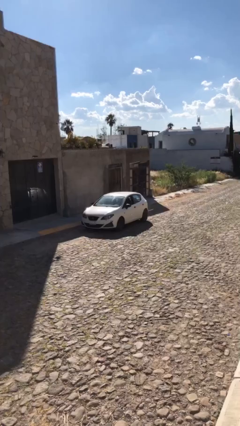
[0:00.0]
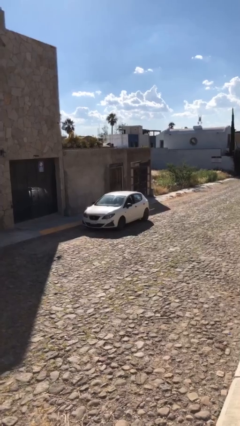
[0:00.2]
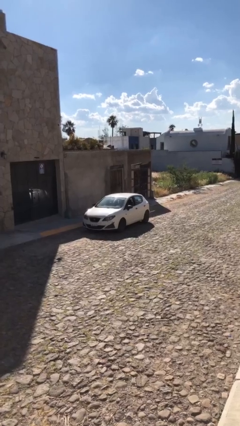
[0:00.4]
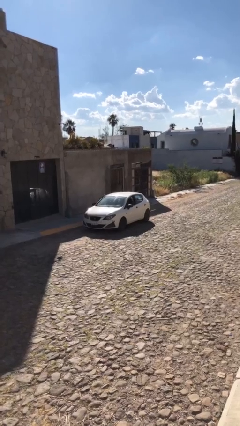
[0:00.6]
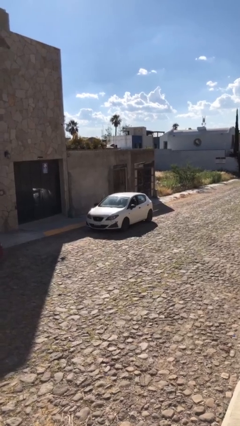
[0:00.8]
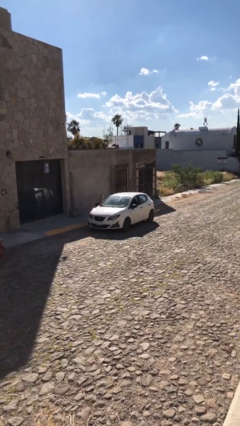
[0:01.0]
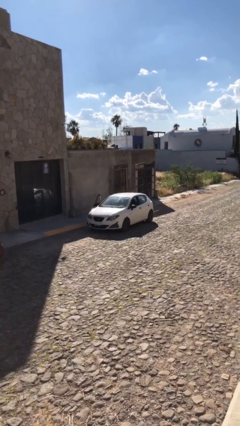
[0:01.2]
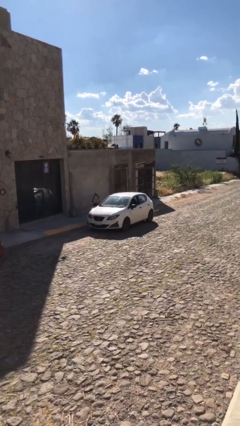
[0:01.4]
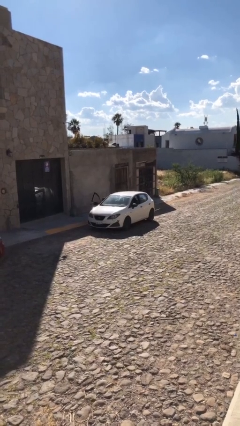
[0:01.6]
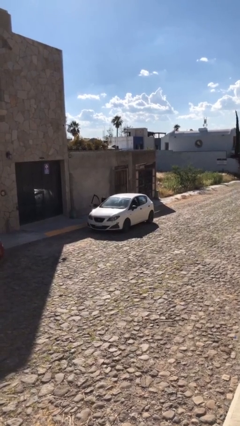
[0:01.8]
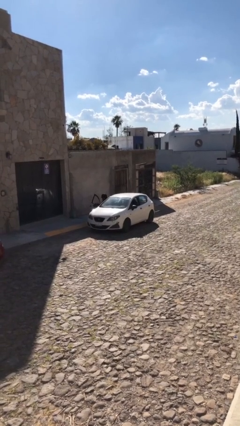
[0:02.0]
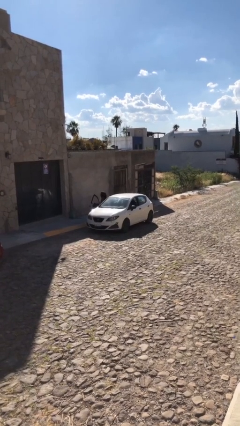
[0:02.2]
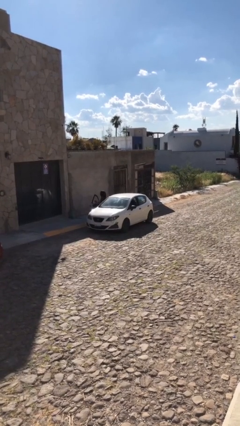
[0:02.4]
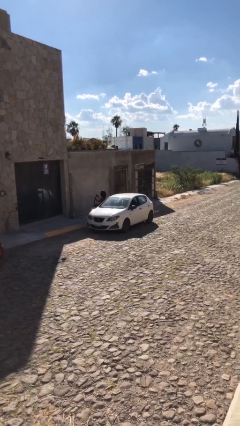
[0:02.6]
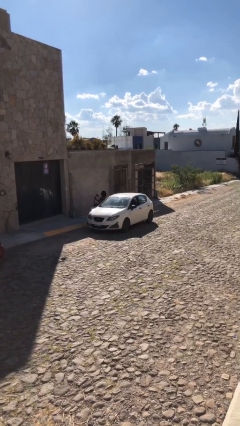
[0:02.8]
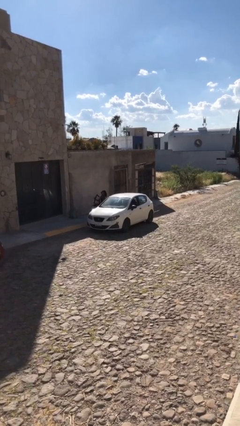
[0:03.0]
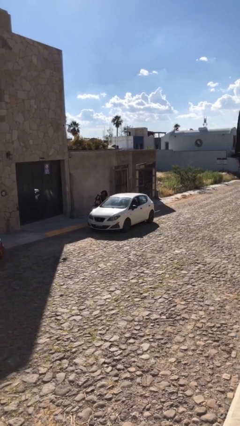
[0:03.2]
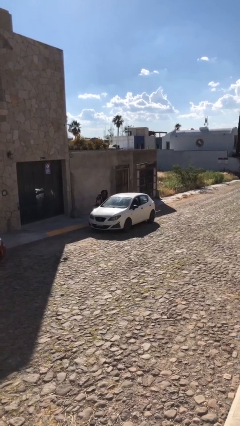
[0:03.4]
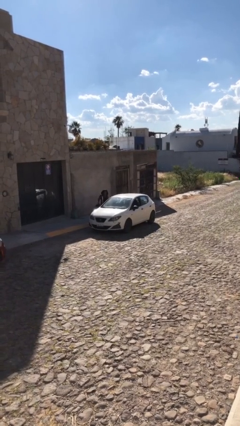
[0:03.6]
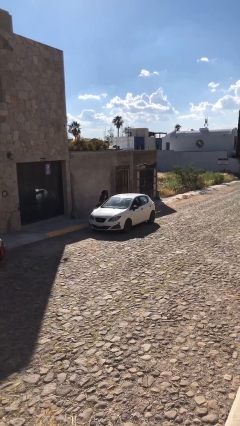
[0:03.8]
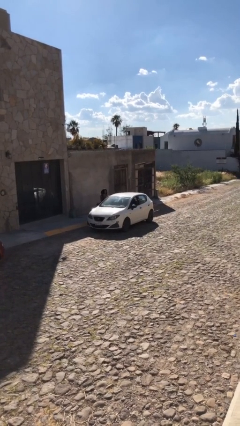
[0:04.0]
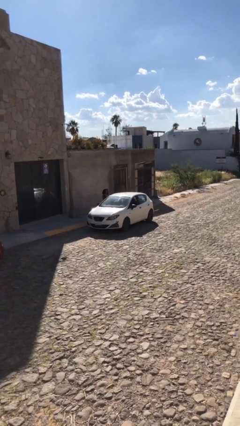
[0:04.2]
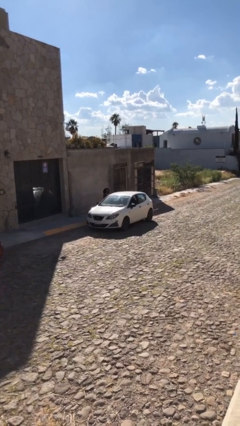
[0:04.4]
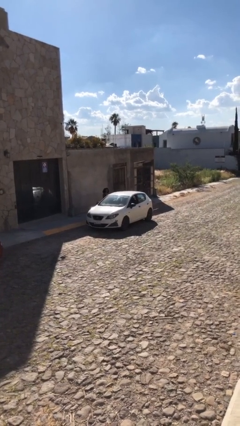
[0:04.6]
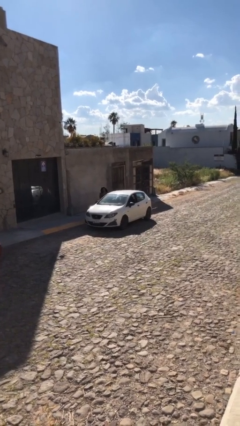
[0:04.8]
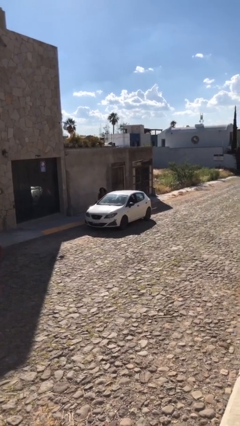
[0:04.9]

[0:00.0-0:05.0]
car drops off person

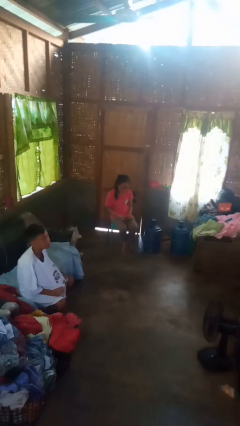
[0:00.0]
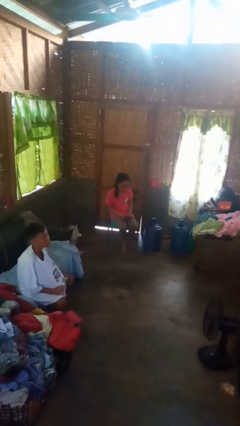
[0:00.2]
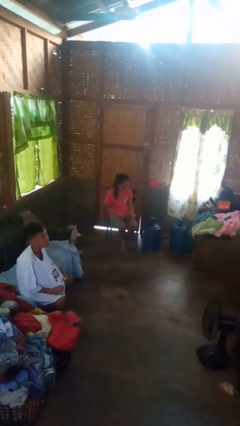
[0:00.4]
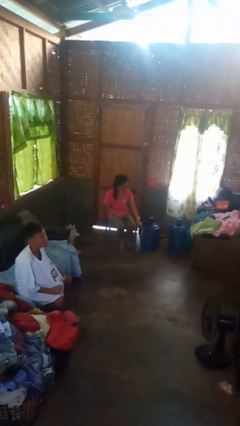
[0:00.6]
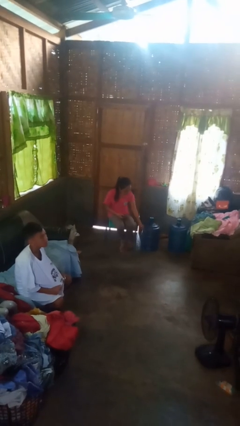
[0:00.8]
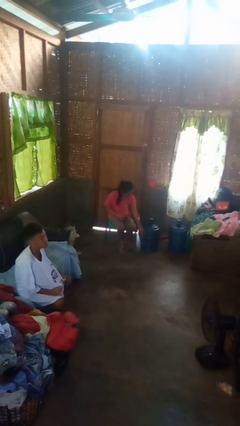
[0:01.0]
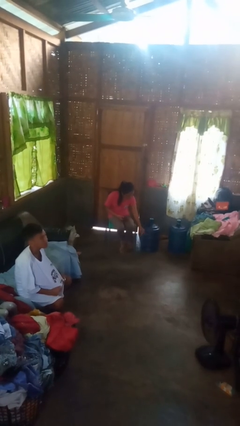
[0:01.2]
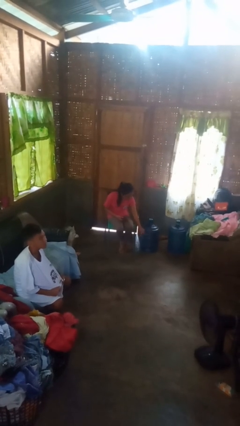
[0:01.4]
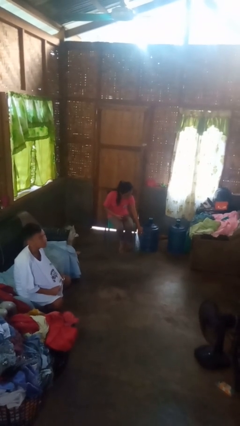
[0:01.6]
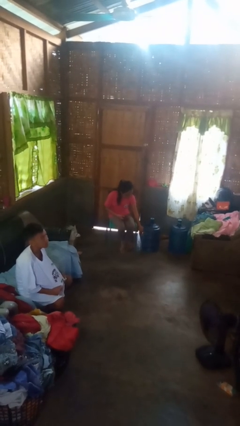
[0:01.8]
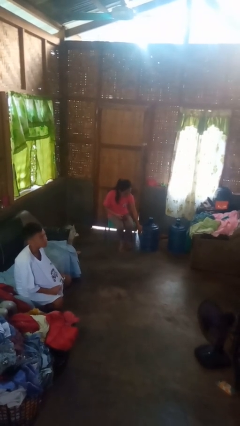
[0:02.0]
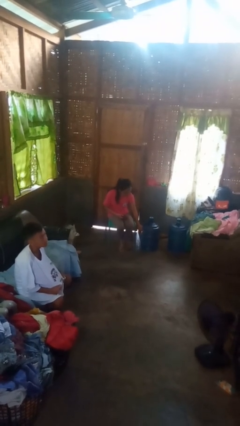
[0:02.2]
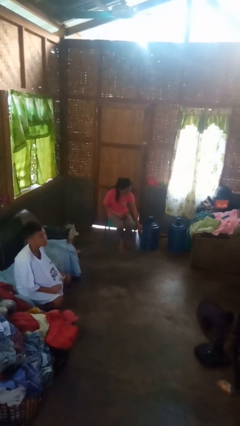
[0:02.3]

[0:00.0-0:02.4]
person taps object with finger

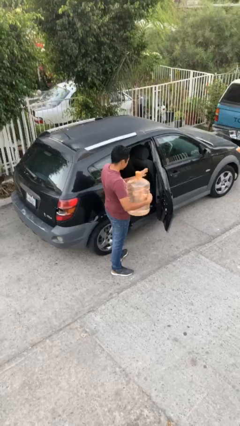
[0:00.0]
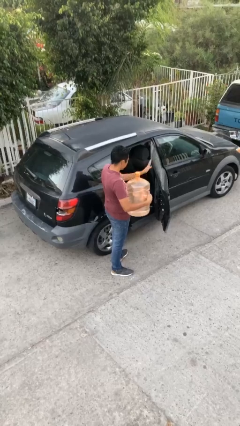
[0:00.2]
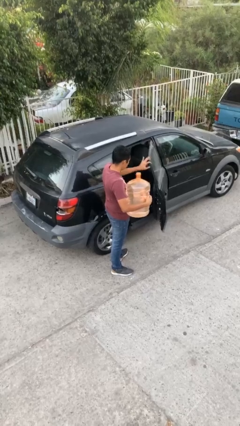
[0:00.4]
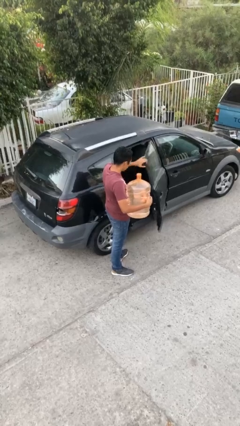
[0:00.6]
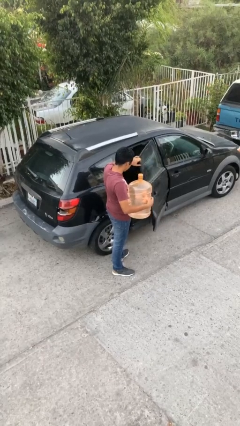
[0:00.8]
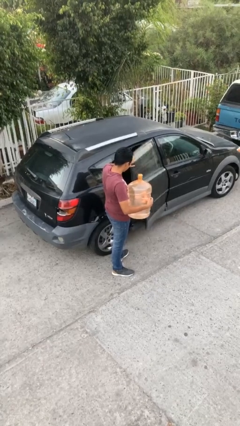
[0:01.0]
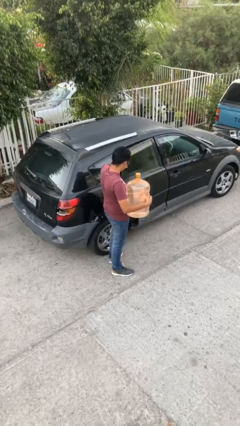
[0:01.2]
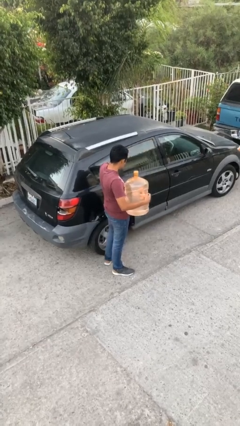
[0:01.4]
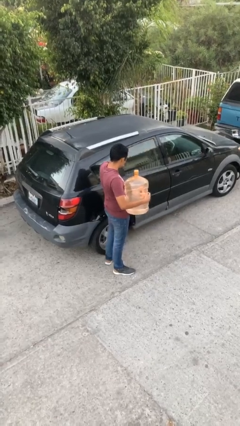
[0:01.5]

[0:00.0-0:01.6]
person closes car door

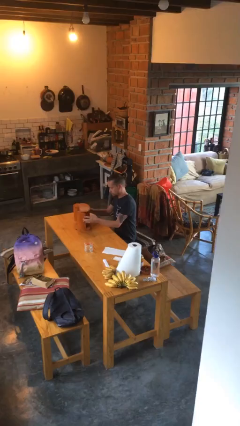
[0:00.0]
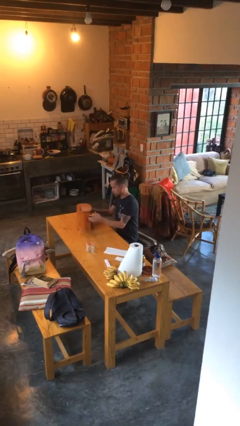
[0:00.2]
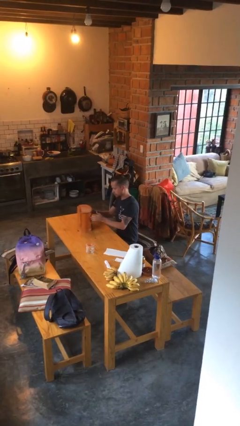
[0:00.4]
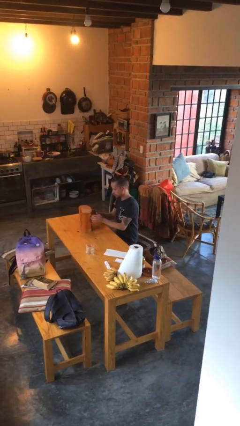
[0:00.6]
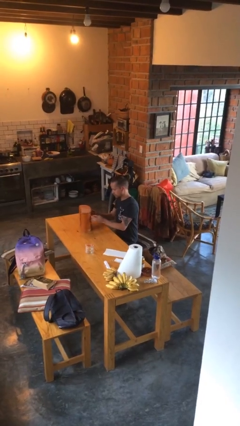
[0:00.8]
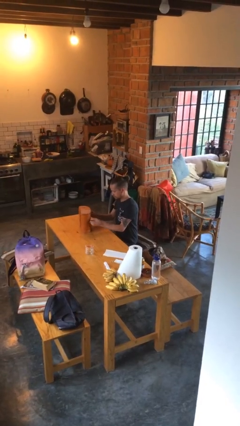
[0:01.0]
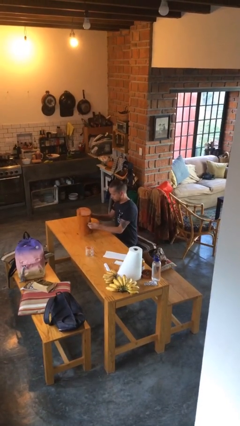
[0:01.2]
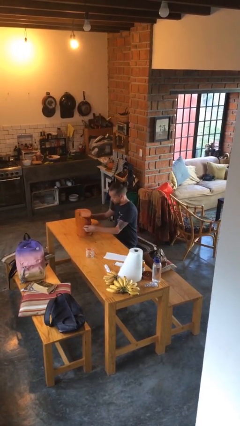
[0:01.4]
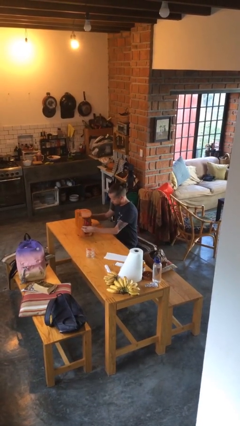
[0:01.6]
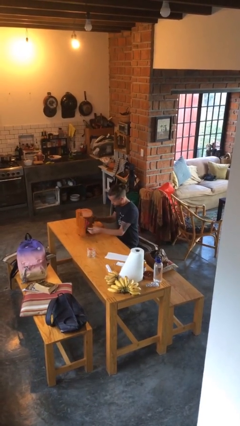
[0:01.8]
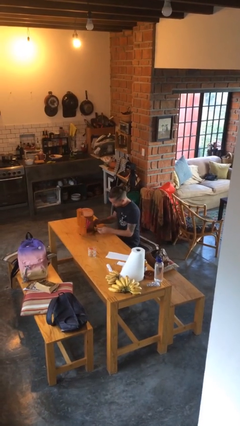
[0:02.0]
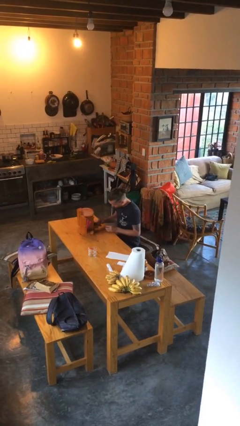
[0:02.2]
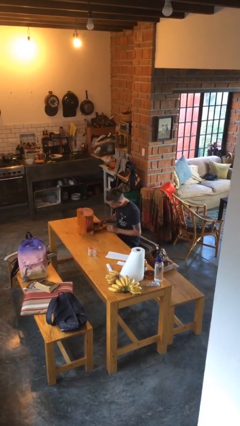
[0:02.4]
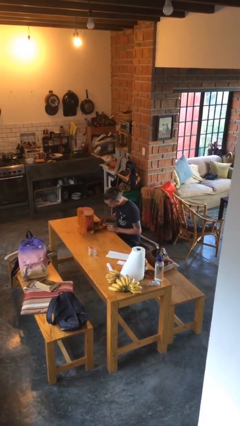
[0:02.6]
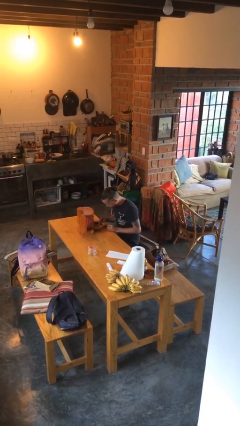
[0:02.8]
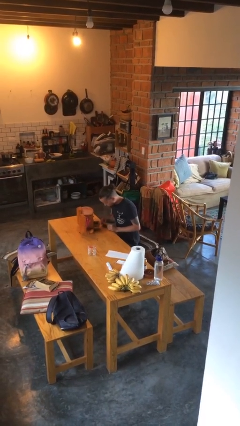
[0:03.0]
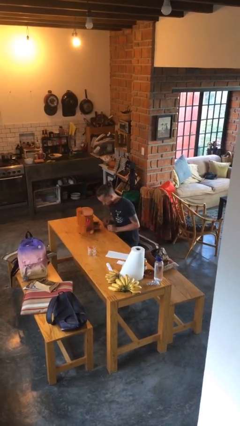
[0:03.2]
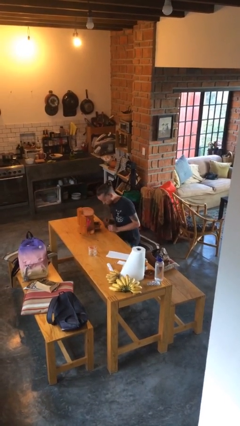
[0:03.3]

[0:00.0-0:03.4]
person opens jewelry box

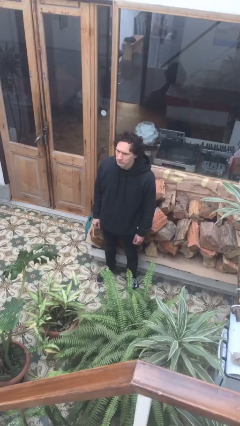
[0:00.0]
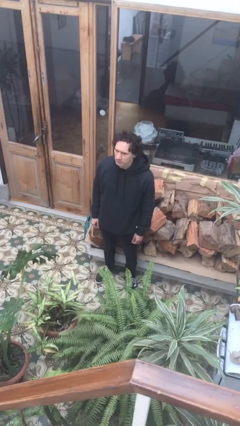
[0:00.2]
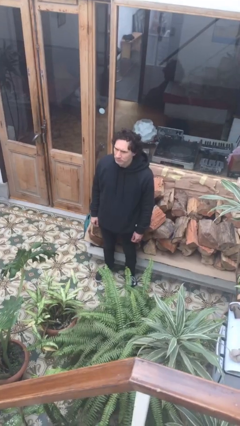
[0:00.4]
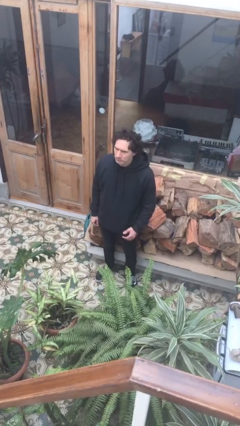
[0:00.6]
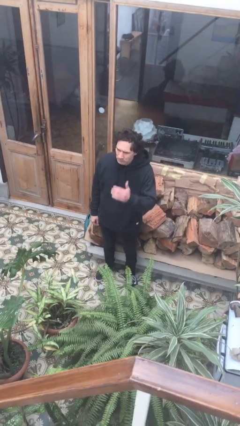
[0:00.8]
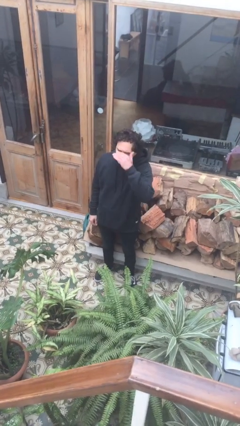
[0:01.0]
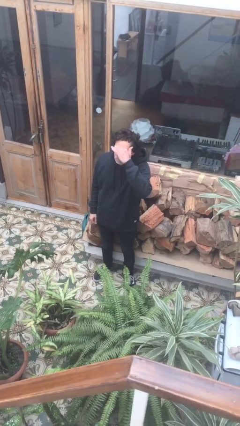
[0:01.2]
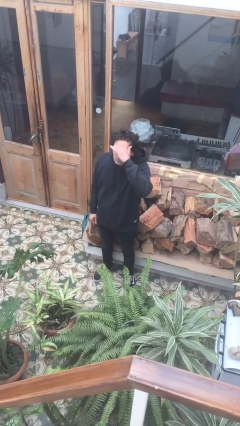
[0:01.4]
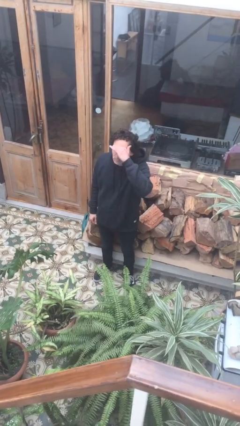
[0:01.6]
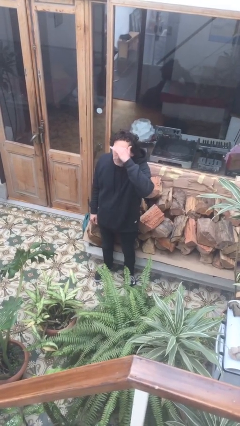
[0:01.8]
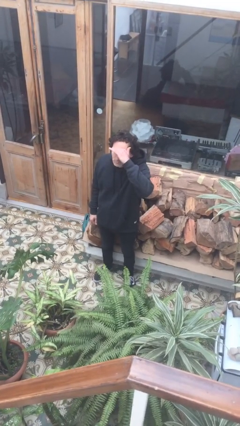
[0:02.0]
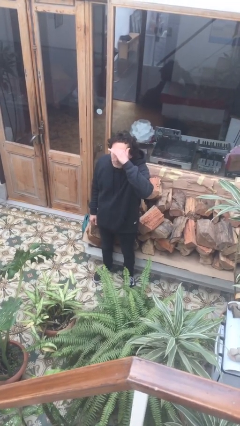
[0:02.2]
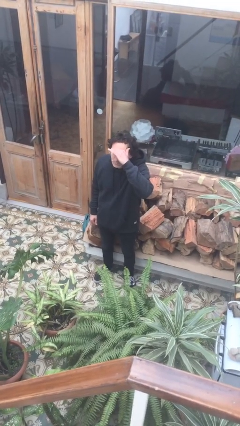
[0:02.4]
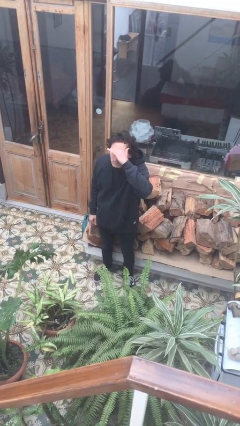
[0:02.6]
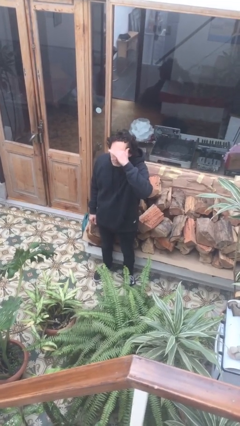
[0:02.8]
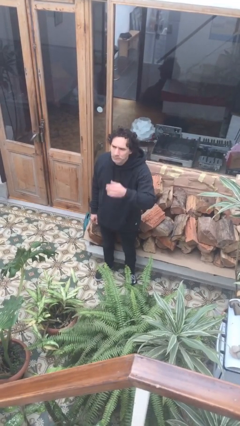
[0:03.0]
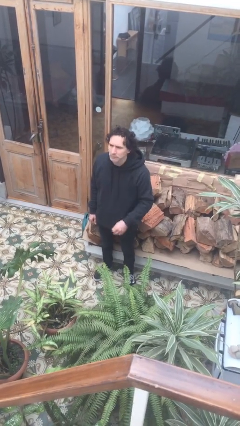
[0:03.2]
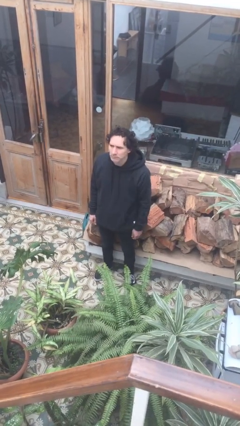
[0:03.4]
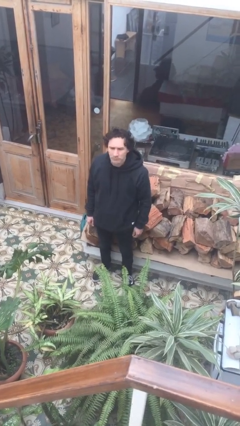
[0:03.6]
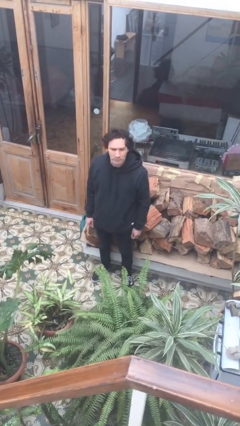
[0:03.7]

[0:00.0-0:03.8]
person shades eyes

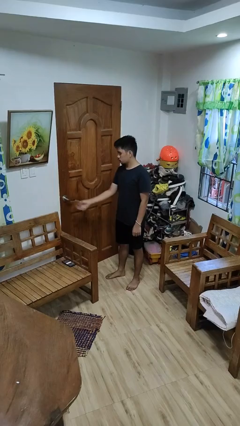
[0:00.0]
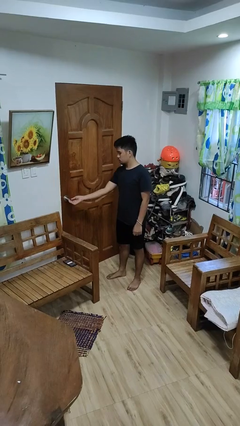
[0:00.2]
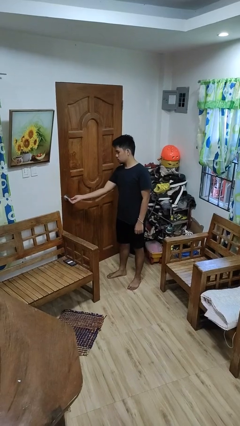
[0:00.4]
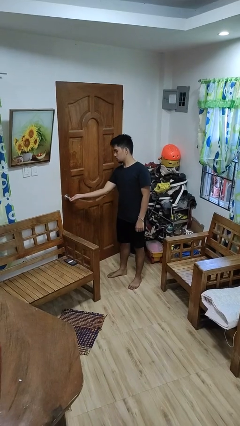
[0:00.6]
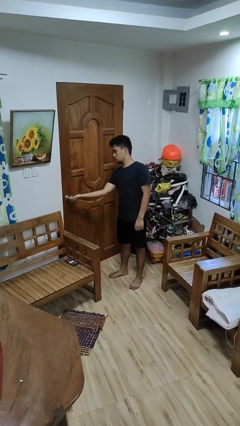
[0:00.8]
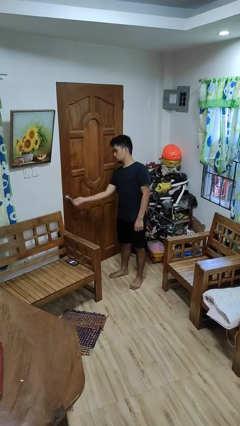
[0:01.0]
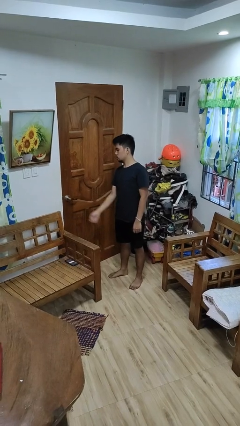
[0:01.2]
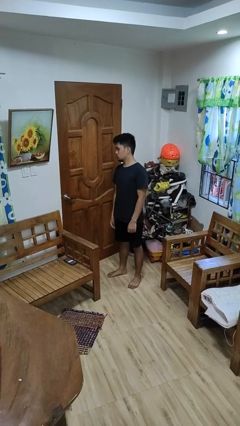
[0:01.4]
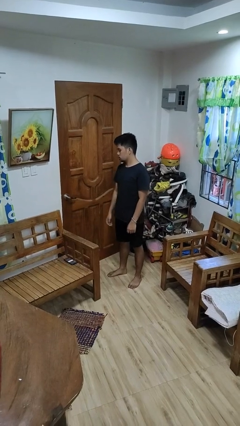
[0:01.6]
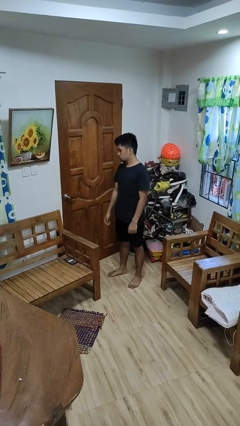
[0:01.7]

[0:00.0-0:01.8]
person unlocks door with keys
